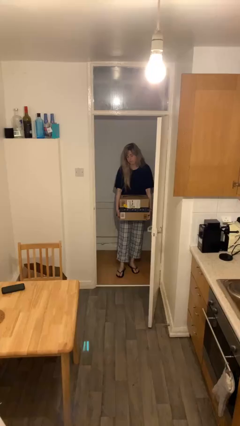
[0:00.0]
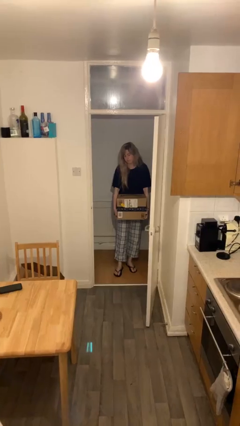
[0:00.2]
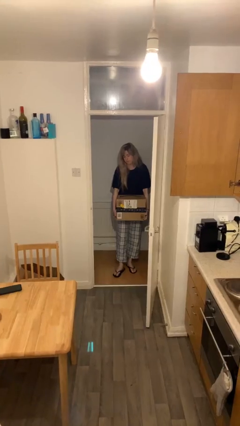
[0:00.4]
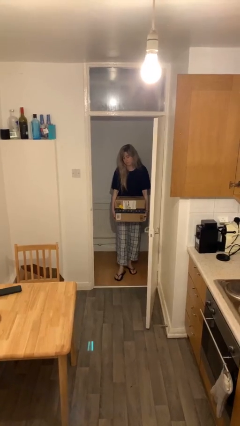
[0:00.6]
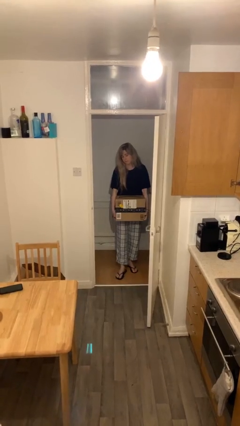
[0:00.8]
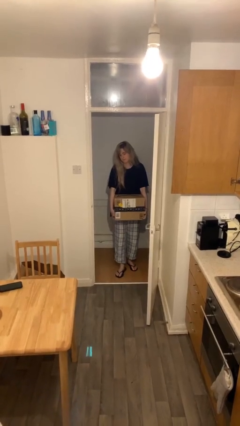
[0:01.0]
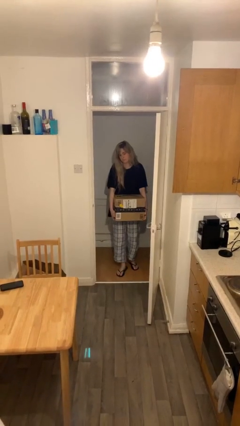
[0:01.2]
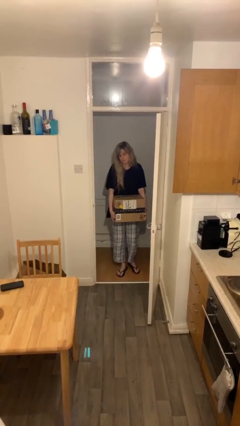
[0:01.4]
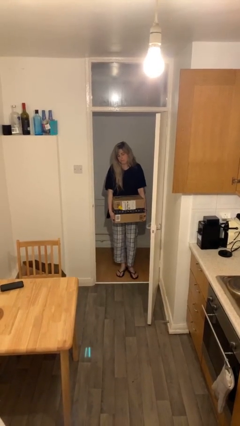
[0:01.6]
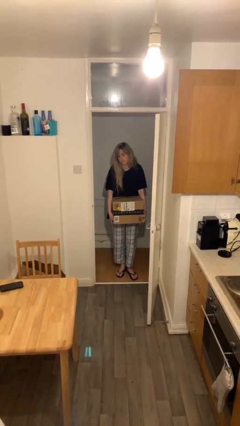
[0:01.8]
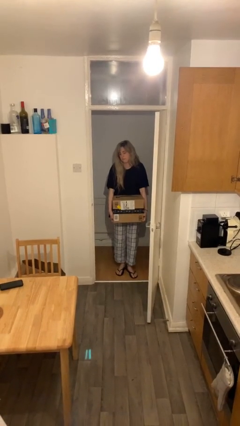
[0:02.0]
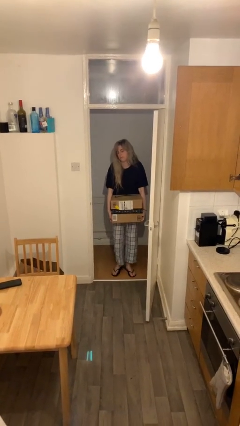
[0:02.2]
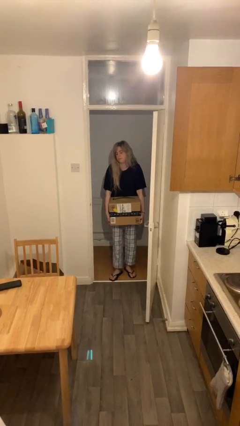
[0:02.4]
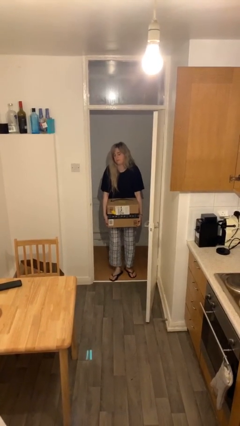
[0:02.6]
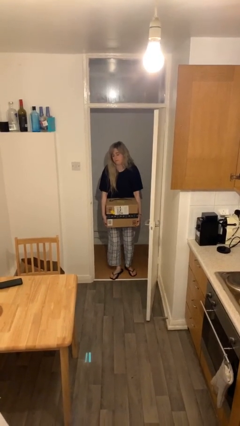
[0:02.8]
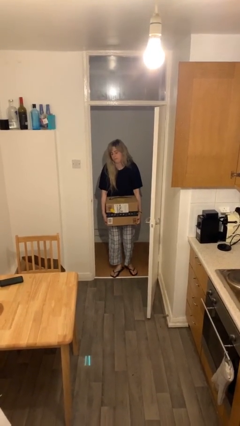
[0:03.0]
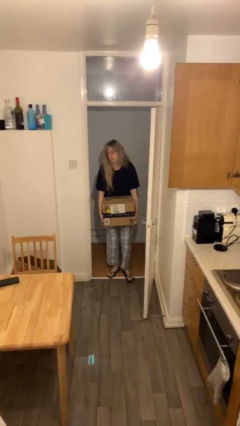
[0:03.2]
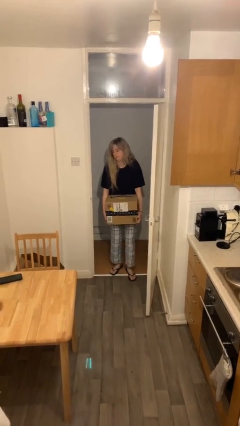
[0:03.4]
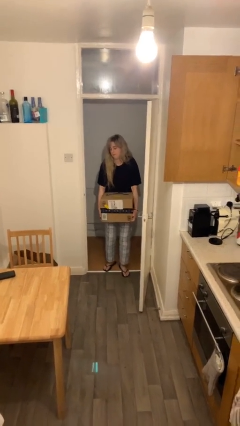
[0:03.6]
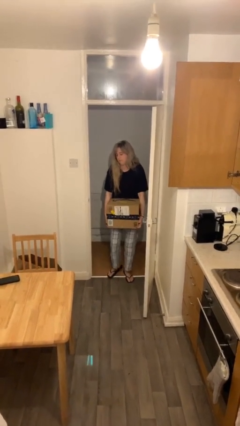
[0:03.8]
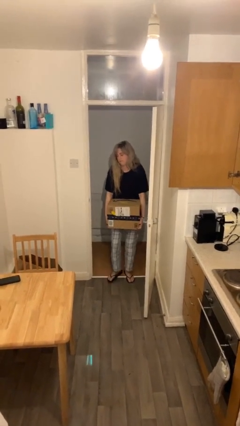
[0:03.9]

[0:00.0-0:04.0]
person carries heavy object

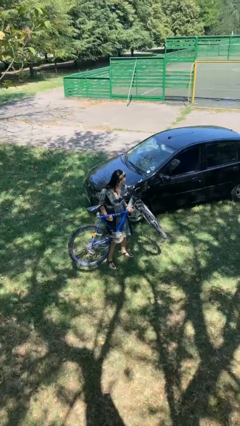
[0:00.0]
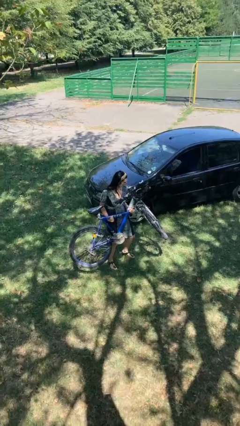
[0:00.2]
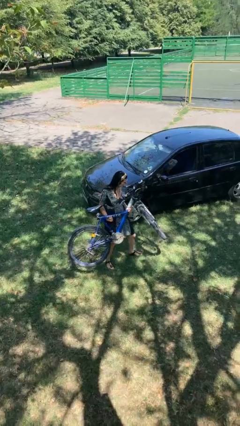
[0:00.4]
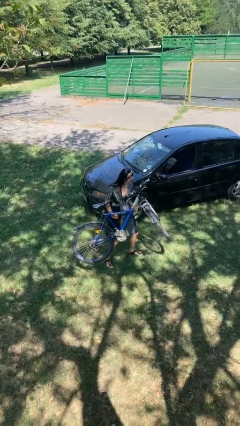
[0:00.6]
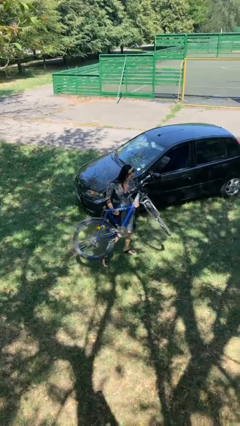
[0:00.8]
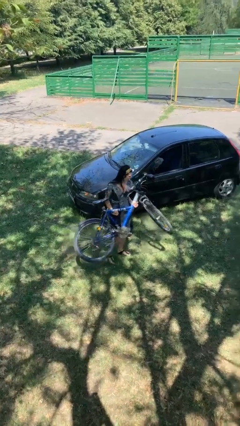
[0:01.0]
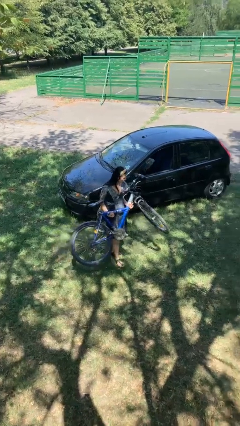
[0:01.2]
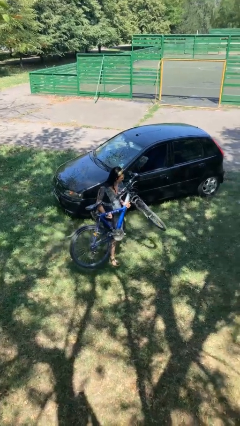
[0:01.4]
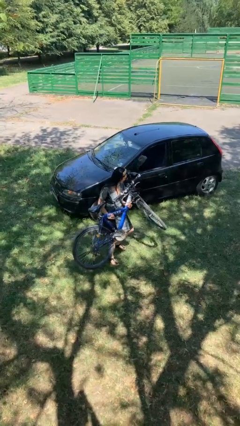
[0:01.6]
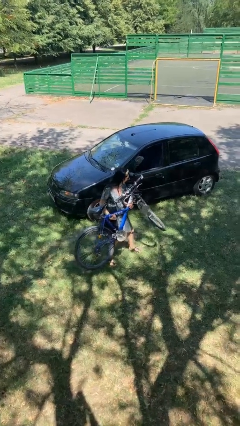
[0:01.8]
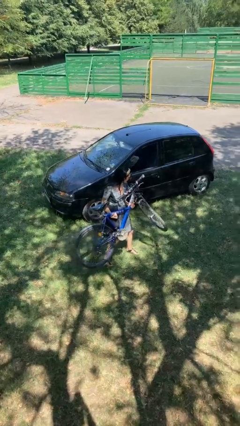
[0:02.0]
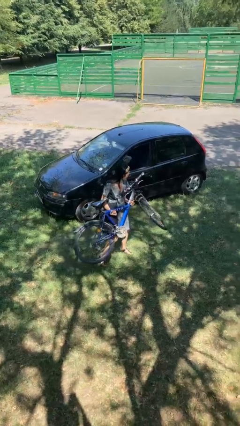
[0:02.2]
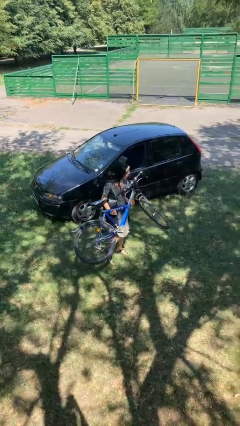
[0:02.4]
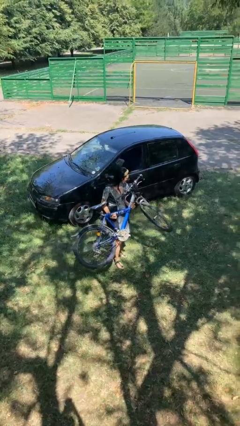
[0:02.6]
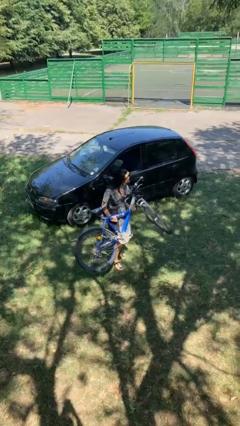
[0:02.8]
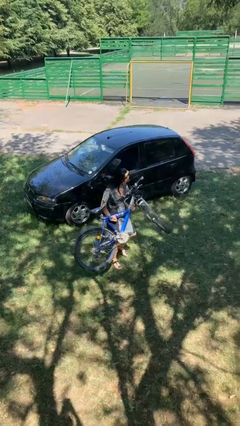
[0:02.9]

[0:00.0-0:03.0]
person carries bicycle

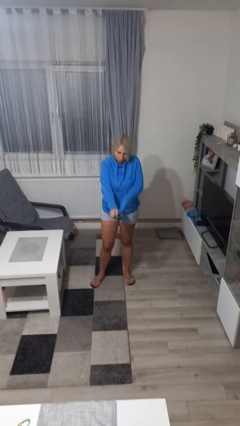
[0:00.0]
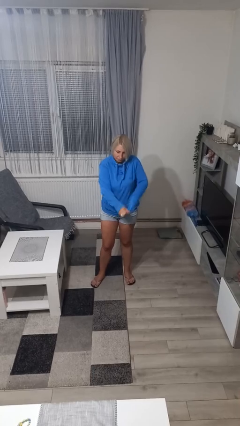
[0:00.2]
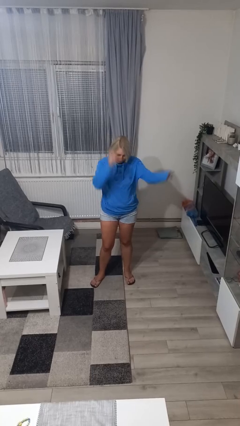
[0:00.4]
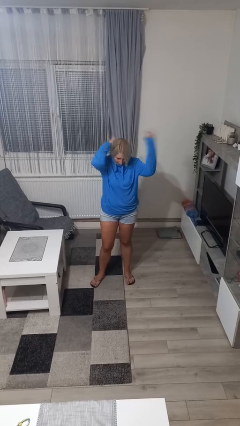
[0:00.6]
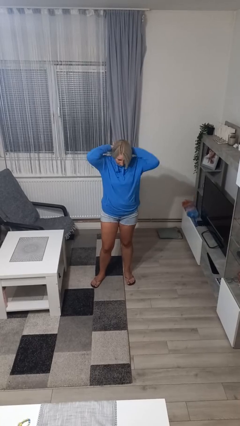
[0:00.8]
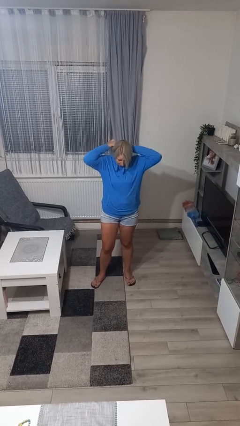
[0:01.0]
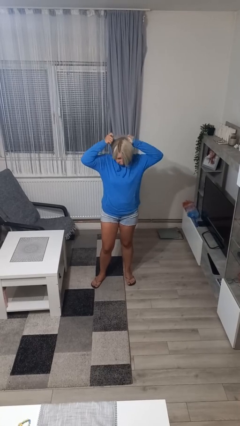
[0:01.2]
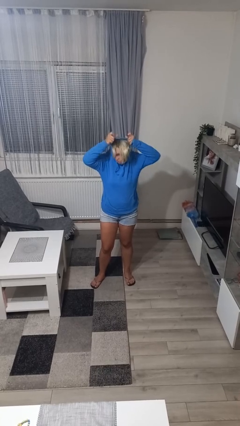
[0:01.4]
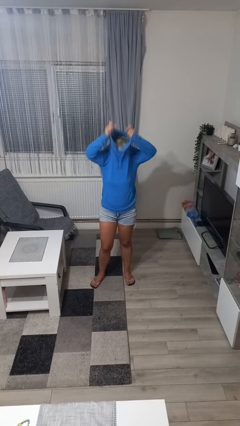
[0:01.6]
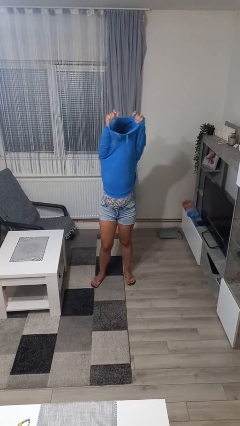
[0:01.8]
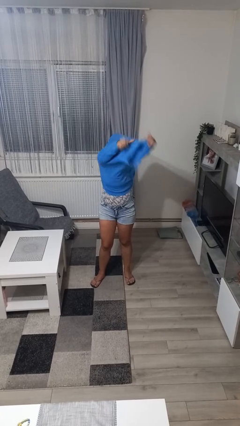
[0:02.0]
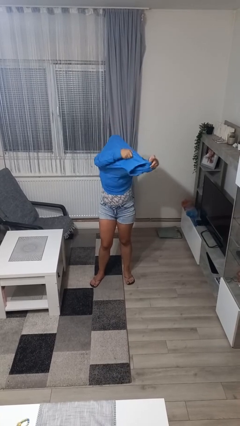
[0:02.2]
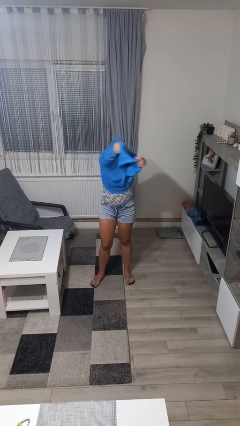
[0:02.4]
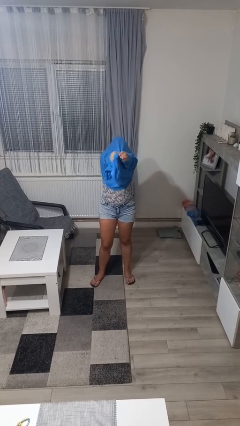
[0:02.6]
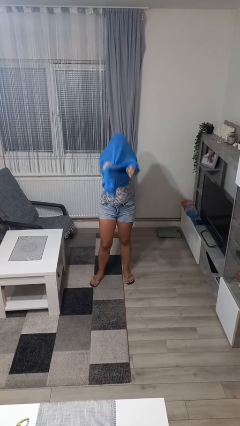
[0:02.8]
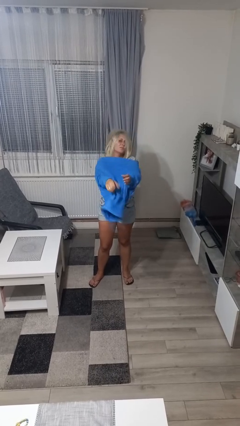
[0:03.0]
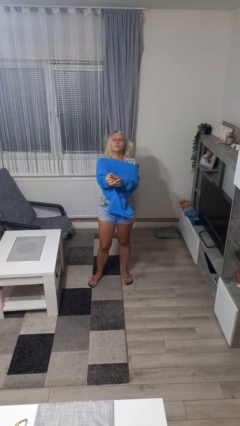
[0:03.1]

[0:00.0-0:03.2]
person takes off hoodie

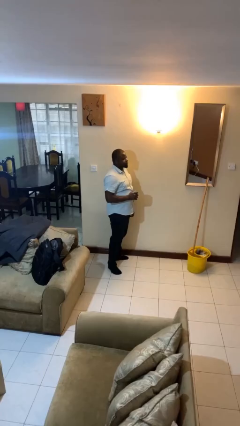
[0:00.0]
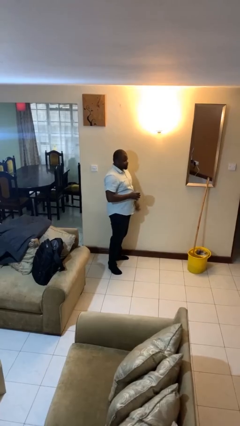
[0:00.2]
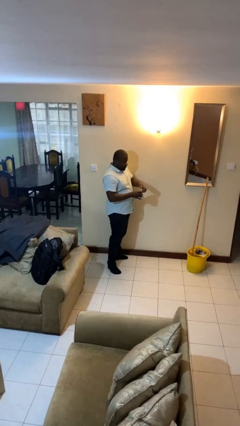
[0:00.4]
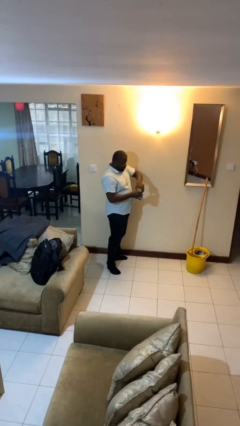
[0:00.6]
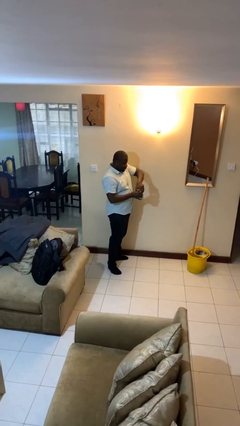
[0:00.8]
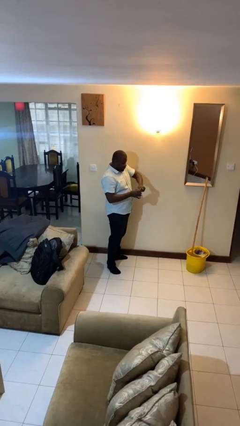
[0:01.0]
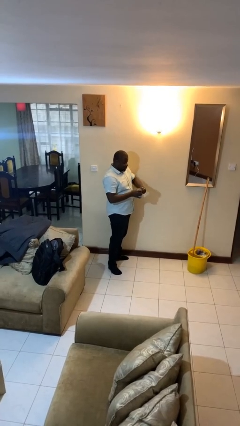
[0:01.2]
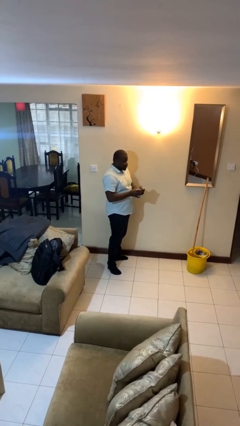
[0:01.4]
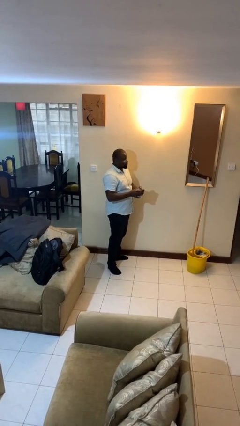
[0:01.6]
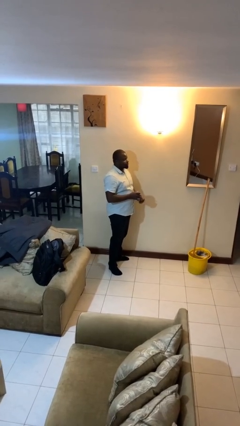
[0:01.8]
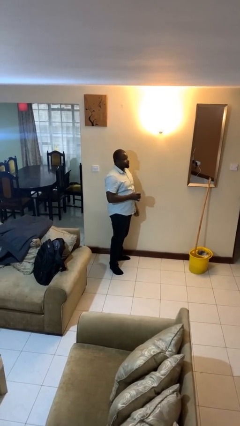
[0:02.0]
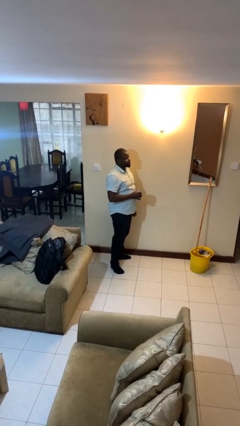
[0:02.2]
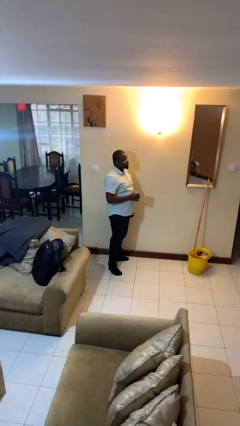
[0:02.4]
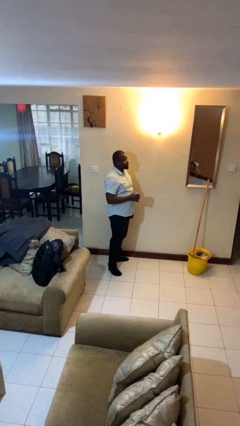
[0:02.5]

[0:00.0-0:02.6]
person opens beverage can

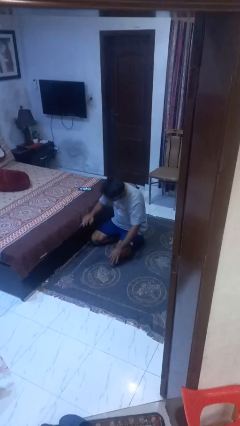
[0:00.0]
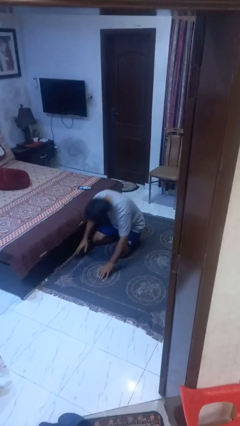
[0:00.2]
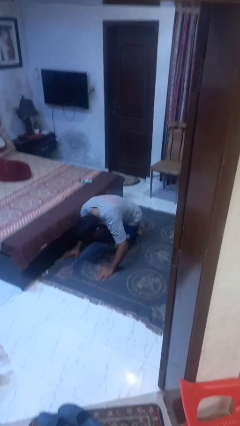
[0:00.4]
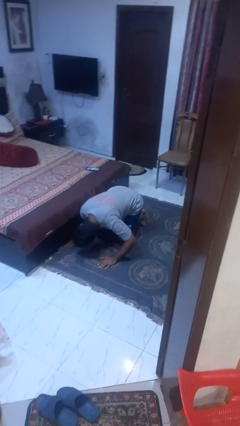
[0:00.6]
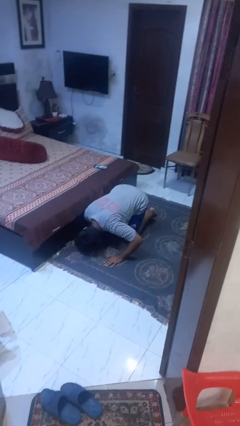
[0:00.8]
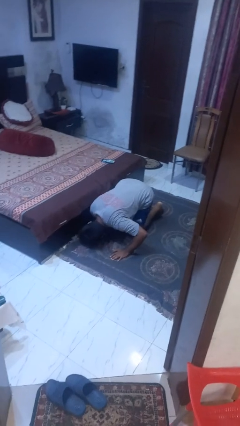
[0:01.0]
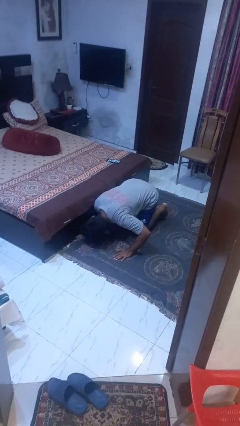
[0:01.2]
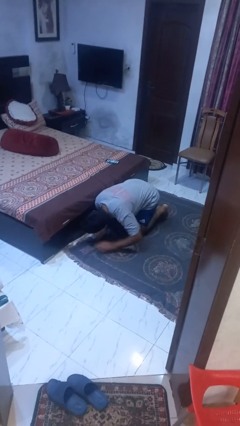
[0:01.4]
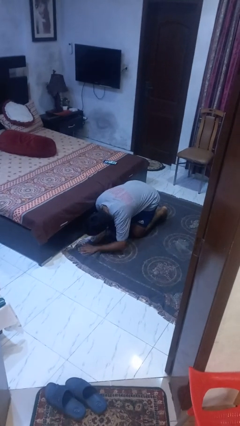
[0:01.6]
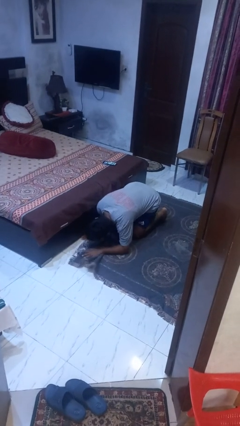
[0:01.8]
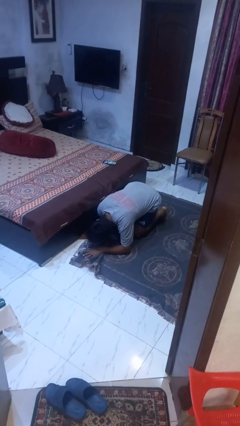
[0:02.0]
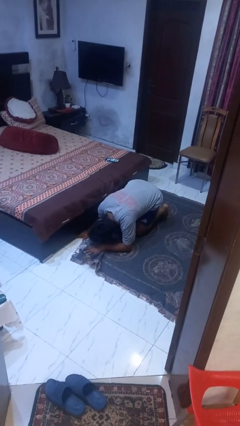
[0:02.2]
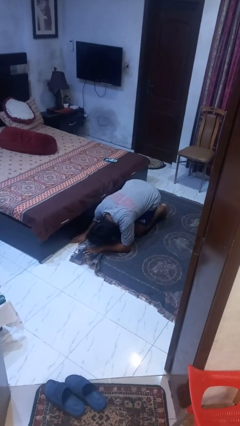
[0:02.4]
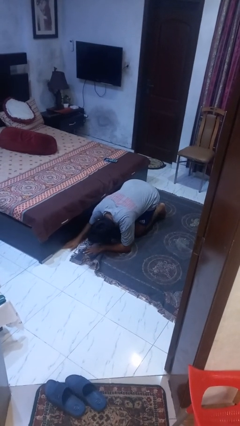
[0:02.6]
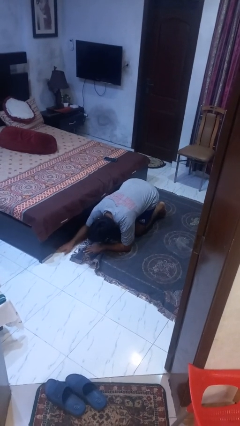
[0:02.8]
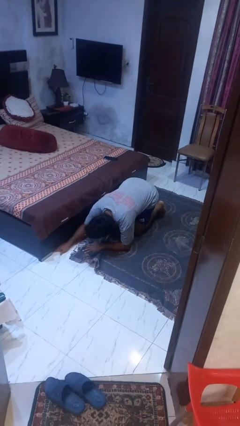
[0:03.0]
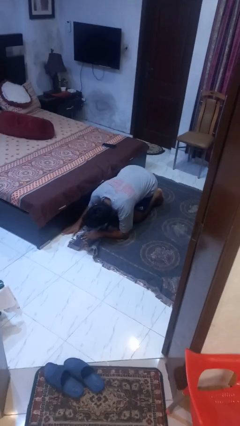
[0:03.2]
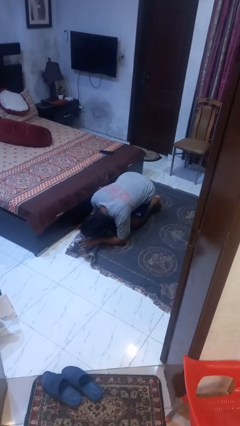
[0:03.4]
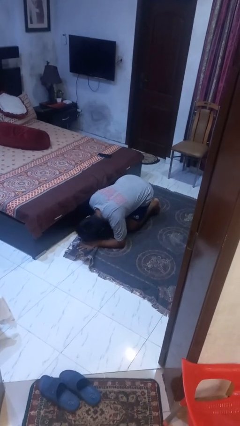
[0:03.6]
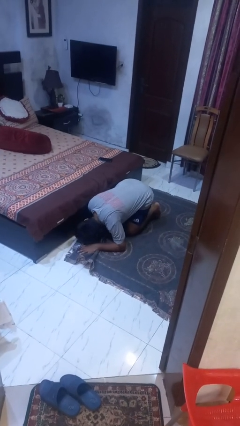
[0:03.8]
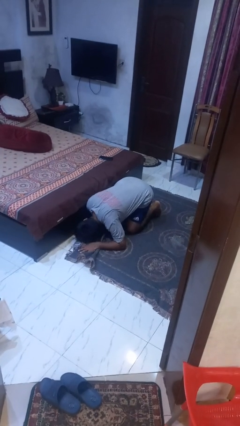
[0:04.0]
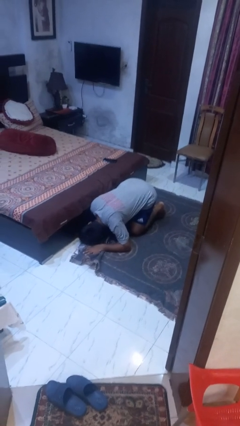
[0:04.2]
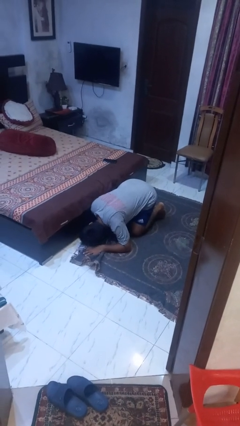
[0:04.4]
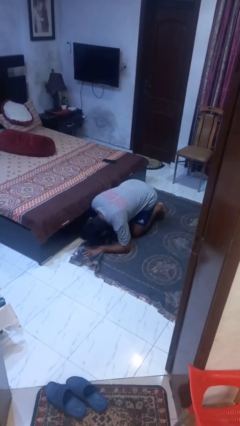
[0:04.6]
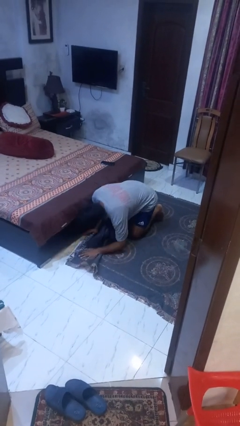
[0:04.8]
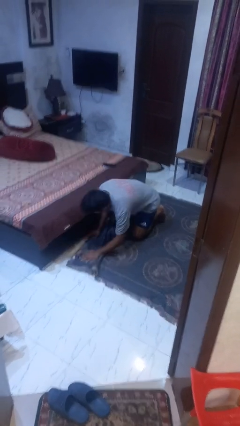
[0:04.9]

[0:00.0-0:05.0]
person searches under bed
